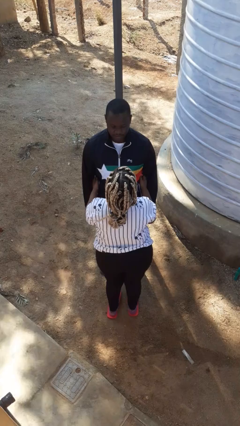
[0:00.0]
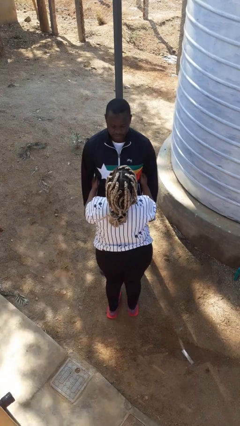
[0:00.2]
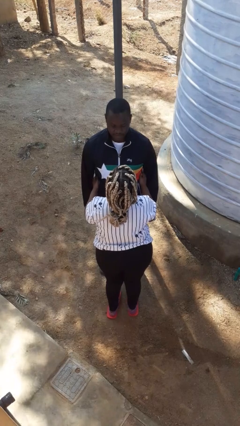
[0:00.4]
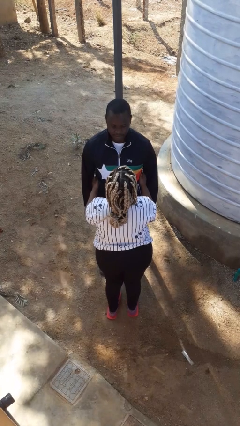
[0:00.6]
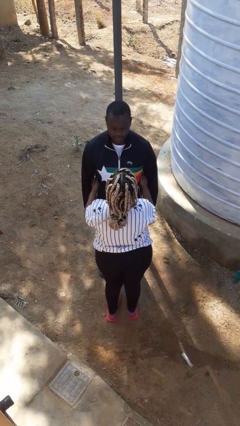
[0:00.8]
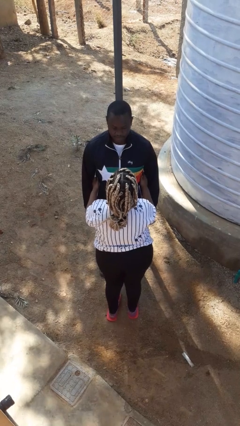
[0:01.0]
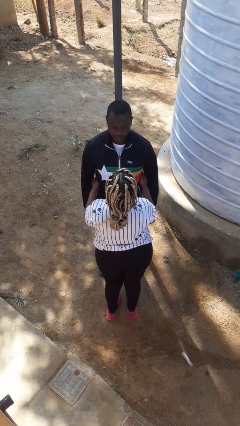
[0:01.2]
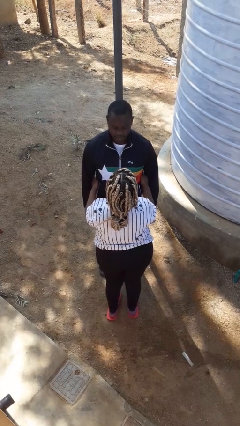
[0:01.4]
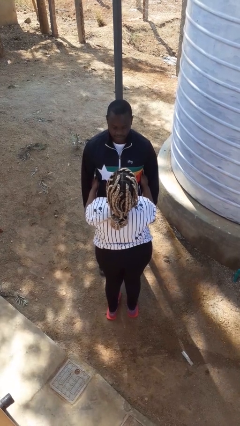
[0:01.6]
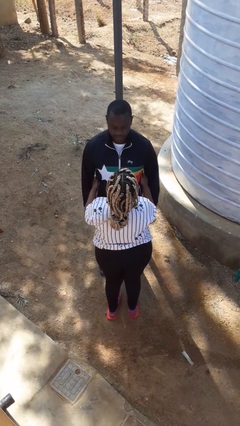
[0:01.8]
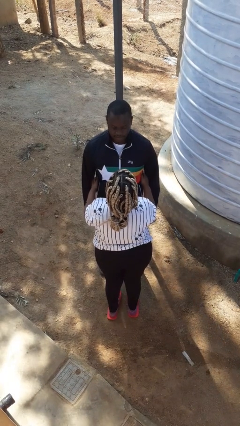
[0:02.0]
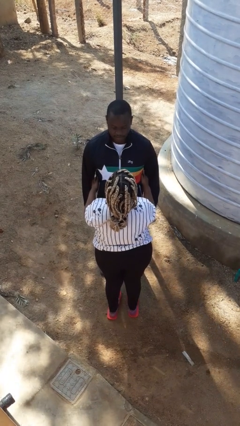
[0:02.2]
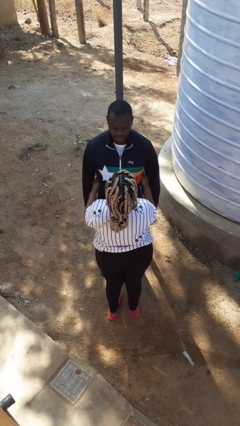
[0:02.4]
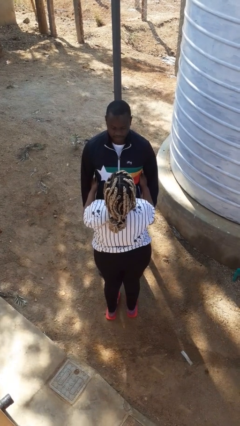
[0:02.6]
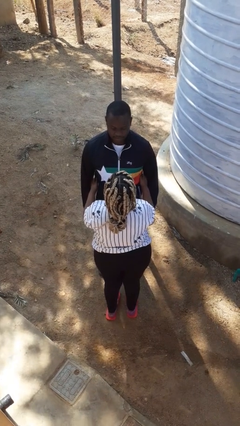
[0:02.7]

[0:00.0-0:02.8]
person tickles person

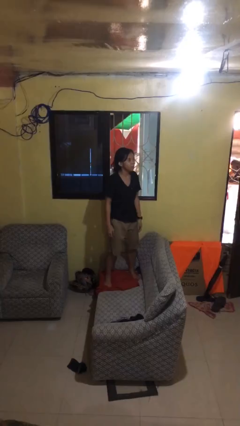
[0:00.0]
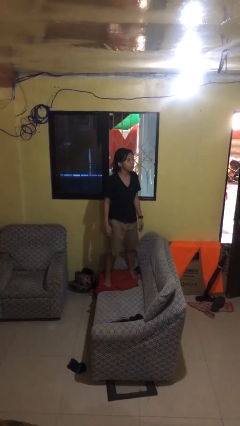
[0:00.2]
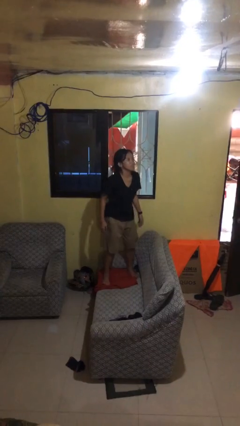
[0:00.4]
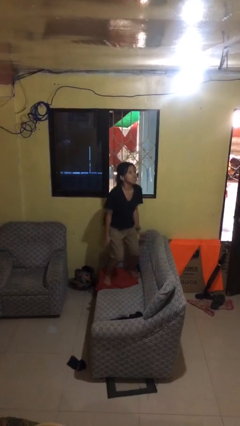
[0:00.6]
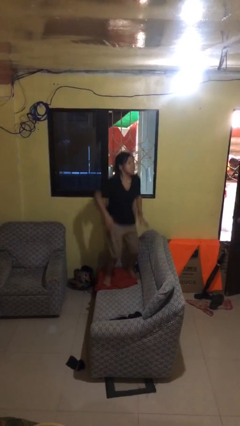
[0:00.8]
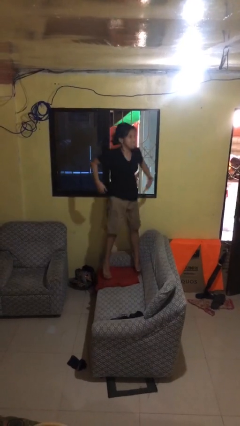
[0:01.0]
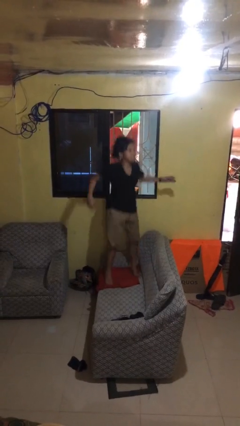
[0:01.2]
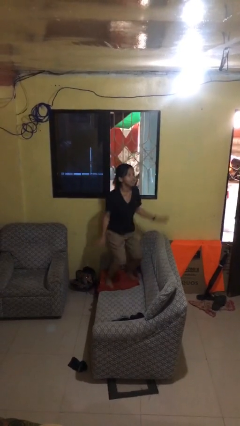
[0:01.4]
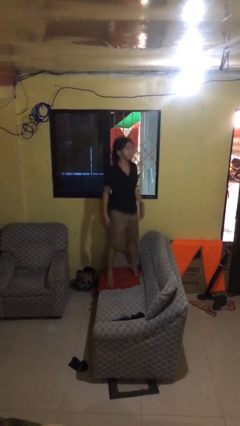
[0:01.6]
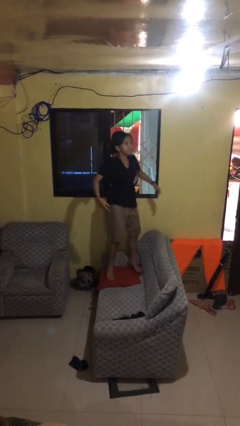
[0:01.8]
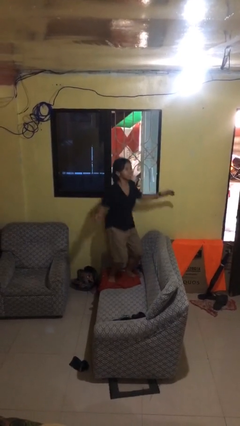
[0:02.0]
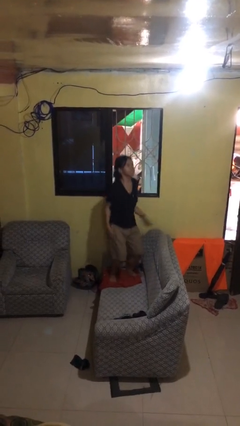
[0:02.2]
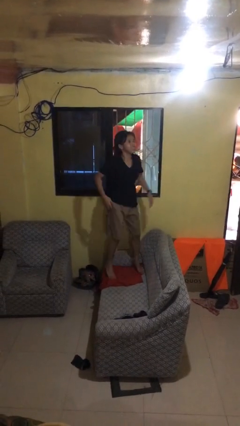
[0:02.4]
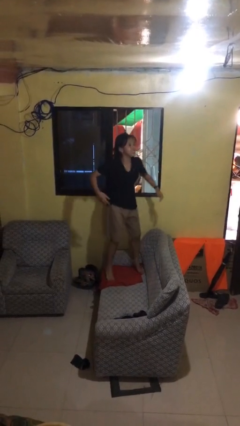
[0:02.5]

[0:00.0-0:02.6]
person jumps on couch

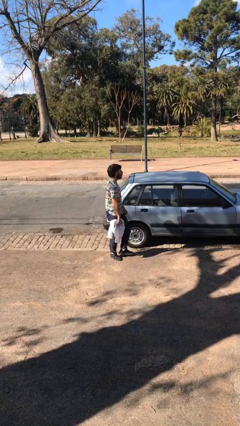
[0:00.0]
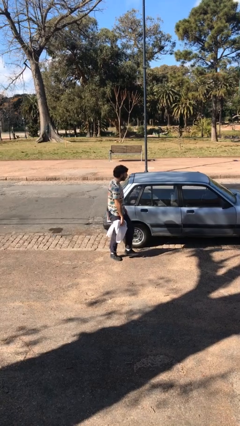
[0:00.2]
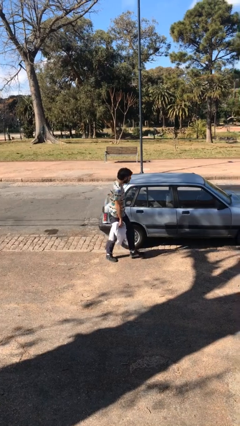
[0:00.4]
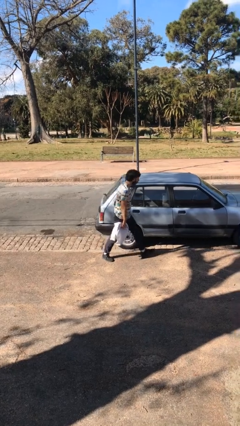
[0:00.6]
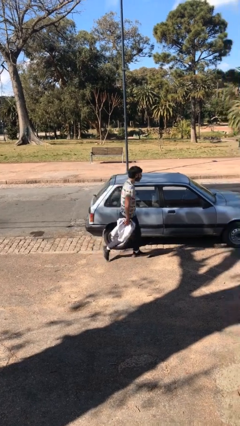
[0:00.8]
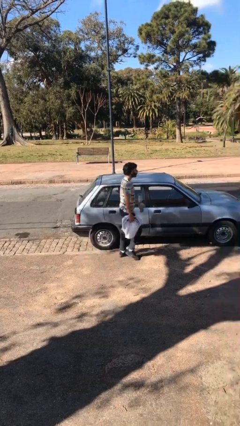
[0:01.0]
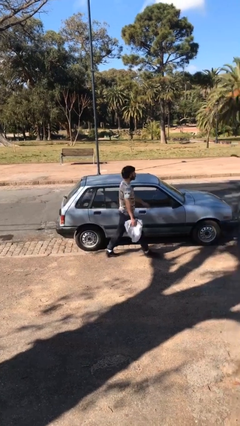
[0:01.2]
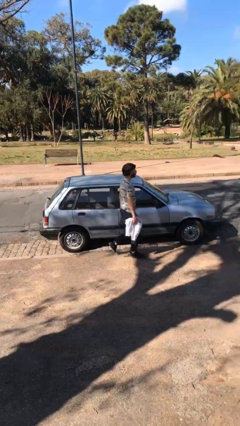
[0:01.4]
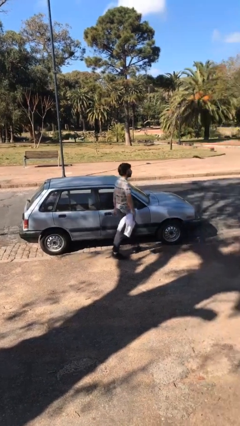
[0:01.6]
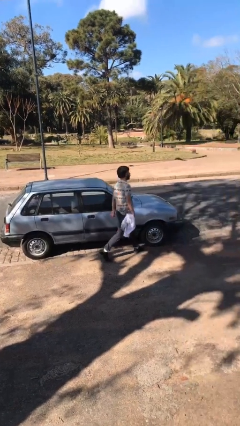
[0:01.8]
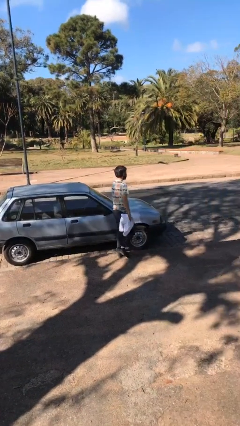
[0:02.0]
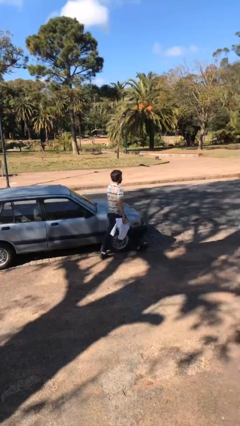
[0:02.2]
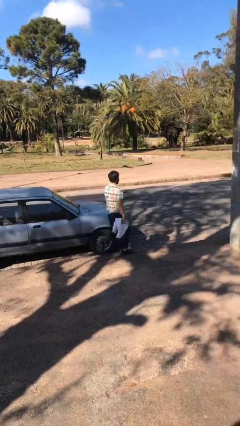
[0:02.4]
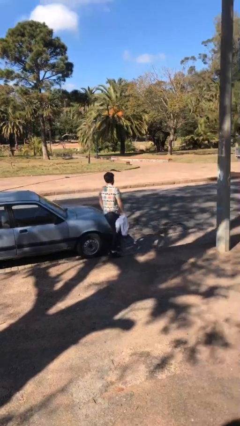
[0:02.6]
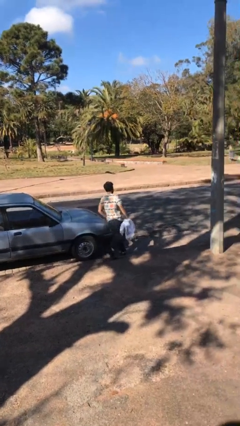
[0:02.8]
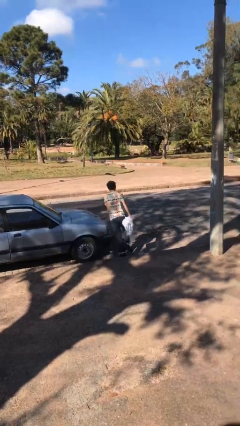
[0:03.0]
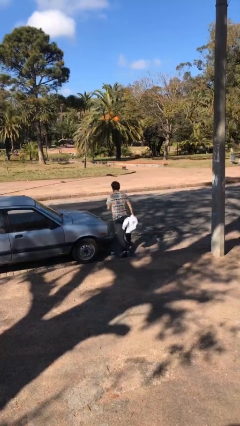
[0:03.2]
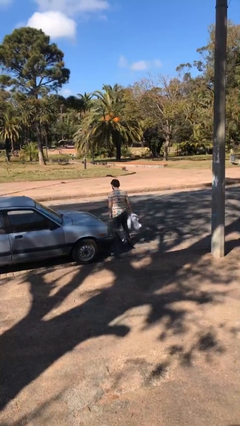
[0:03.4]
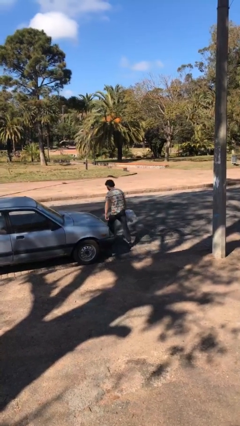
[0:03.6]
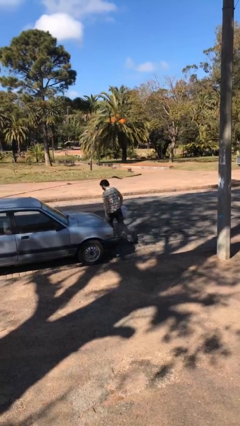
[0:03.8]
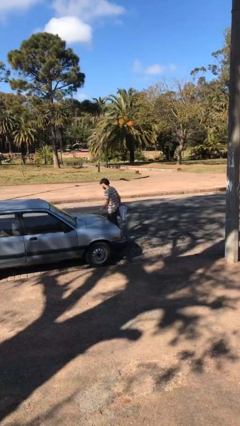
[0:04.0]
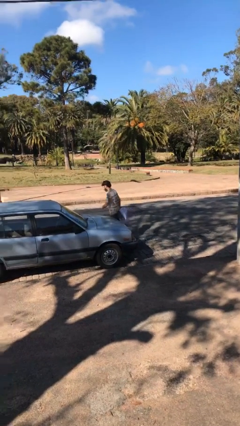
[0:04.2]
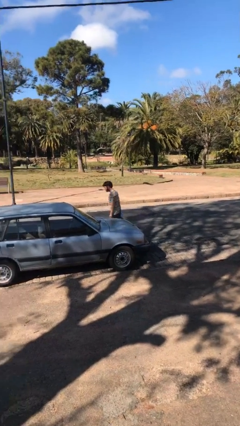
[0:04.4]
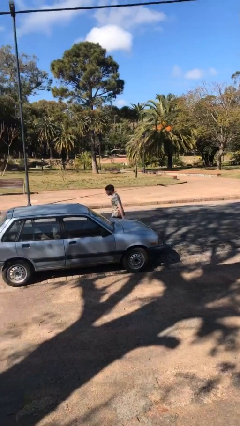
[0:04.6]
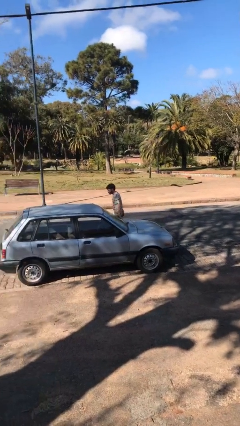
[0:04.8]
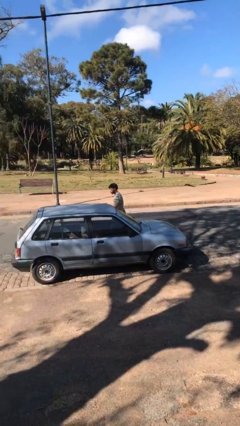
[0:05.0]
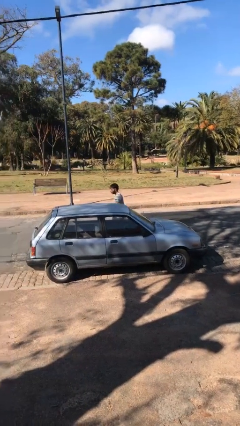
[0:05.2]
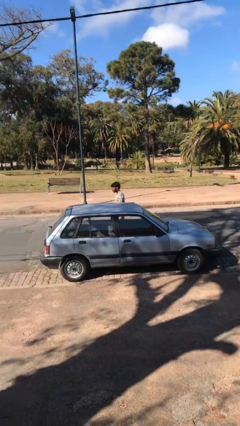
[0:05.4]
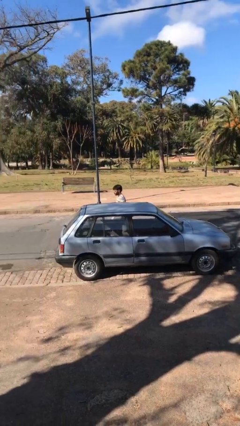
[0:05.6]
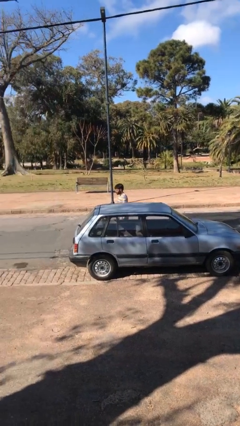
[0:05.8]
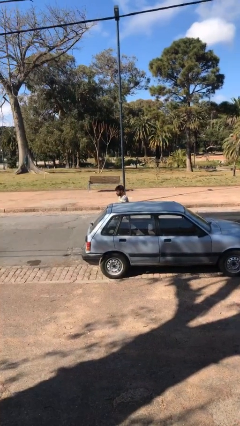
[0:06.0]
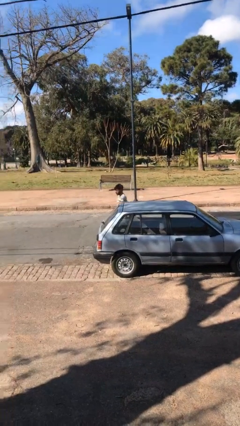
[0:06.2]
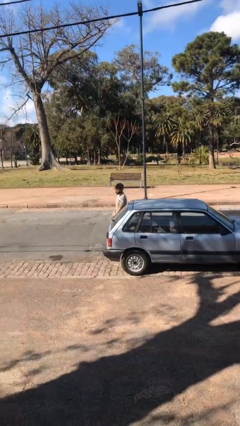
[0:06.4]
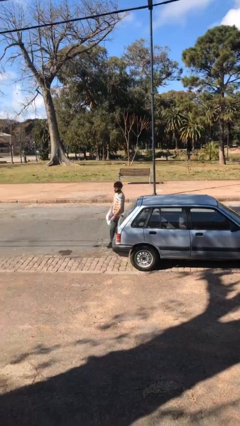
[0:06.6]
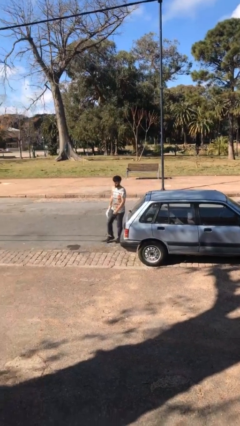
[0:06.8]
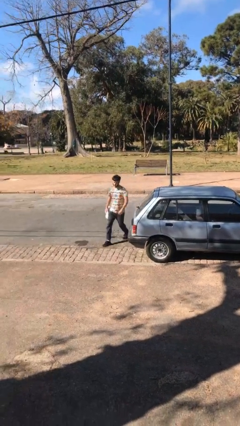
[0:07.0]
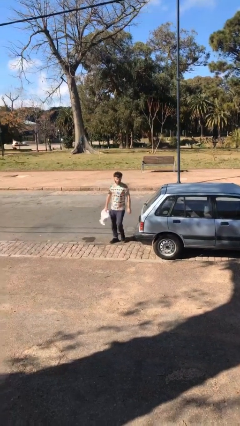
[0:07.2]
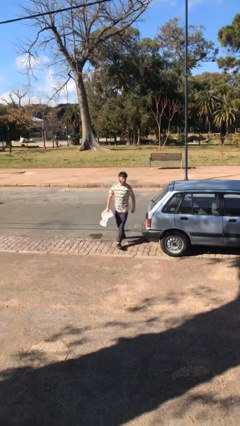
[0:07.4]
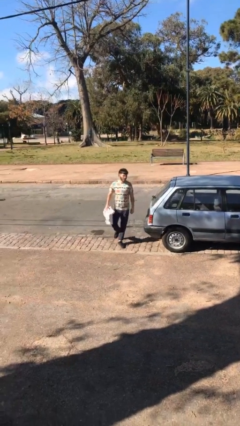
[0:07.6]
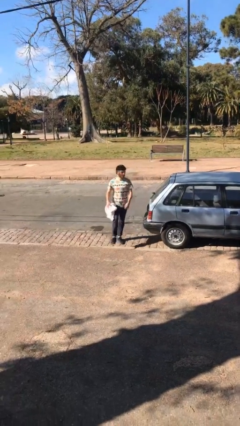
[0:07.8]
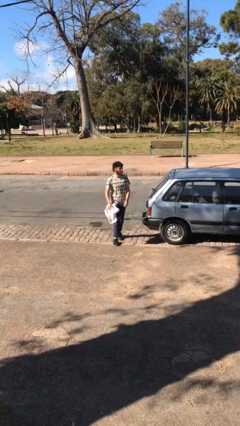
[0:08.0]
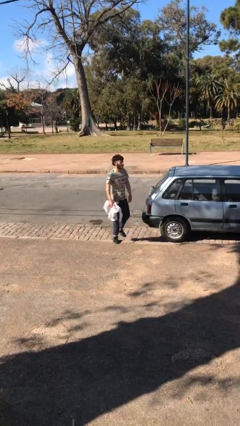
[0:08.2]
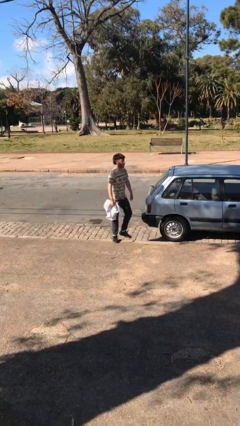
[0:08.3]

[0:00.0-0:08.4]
person walks around car

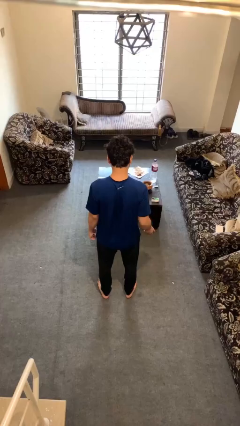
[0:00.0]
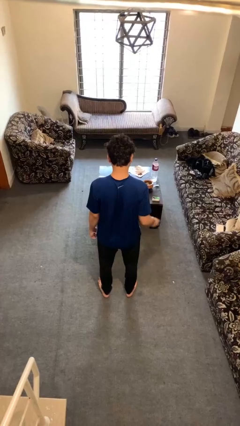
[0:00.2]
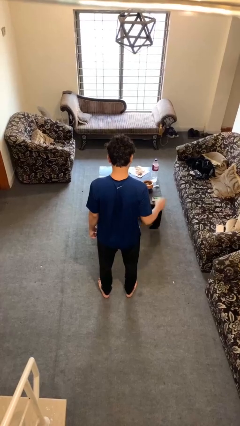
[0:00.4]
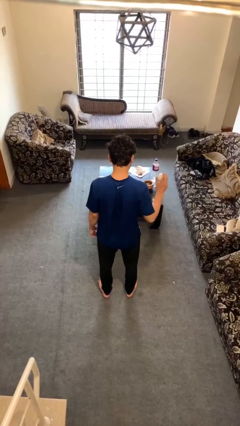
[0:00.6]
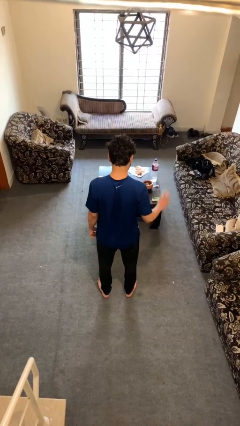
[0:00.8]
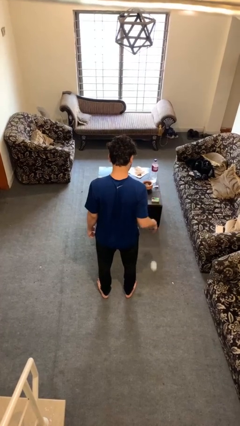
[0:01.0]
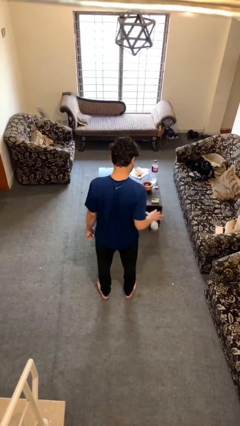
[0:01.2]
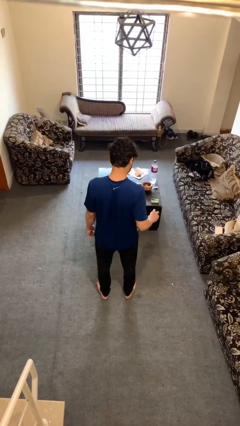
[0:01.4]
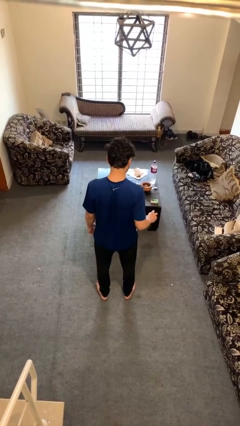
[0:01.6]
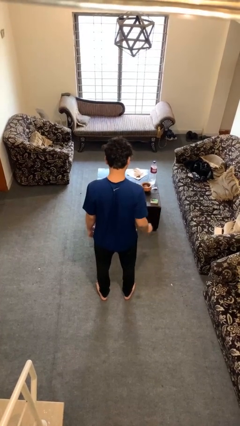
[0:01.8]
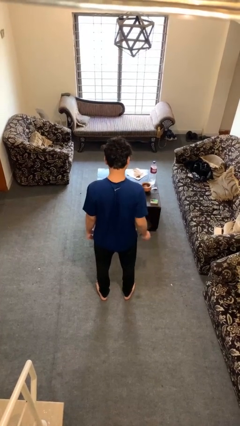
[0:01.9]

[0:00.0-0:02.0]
person bounces ball on floor

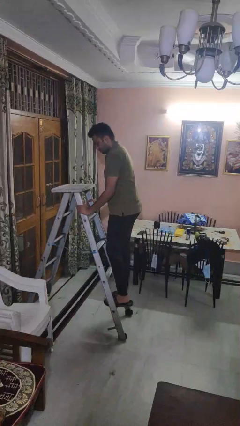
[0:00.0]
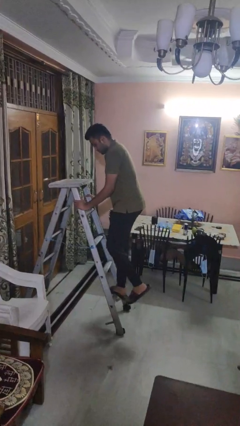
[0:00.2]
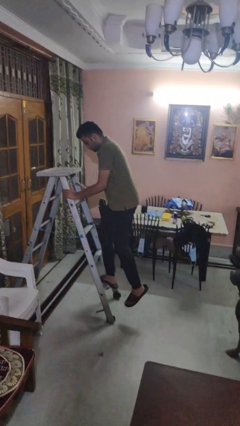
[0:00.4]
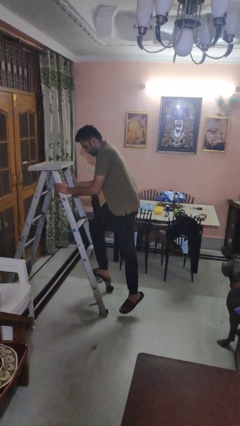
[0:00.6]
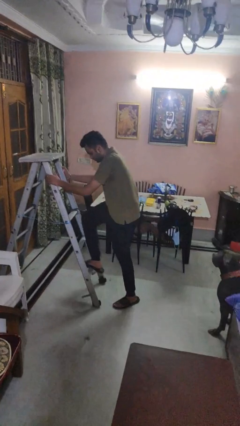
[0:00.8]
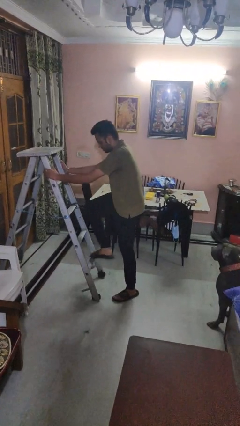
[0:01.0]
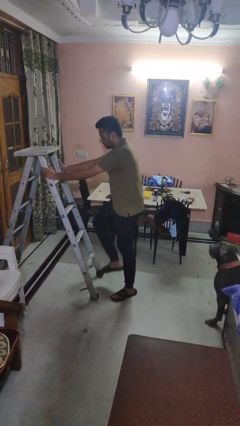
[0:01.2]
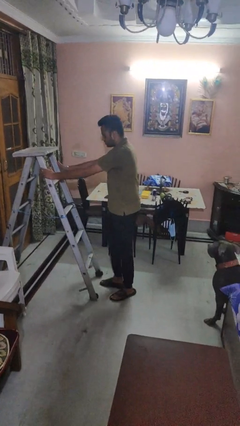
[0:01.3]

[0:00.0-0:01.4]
person climbs down ladder

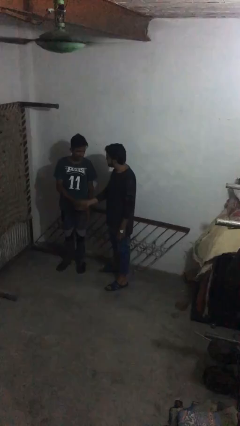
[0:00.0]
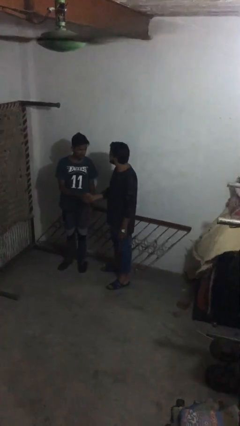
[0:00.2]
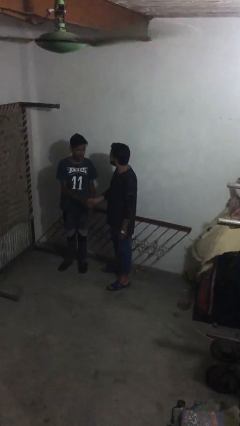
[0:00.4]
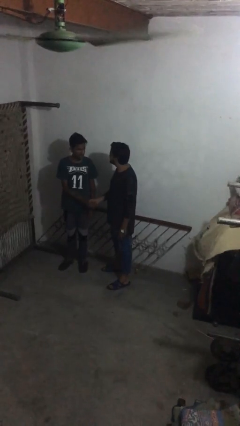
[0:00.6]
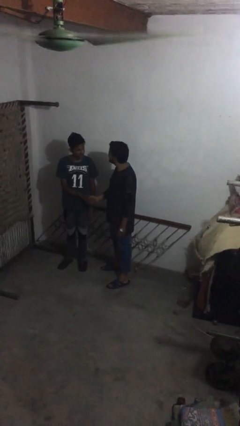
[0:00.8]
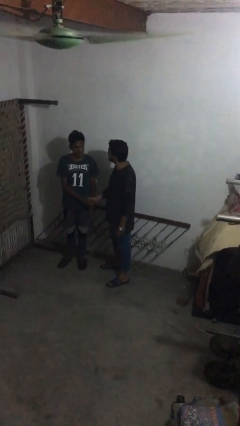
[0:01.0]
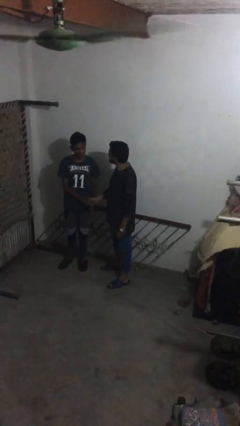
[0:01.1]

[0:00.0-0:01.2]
person shakes hand
